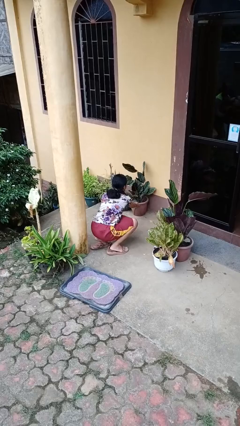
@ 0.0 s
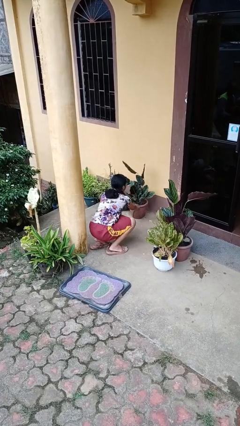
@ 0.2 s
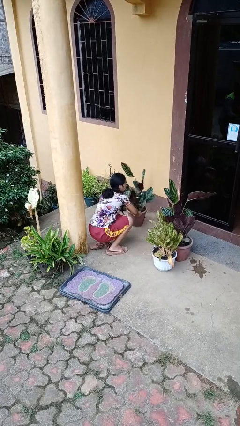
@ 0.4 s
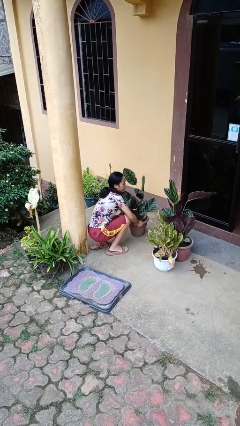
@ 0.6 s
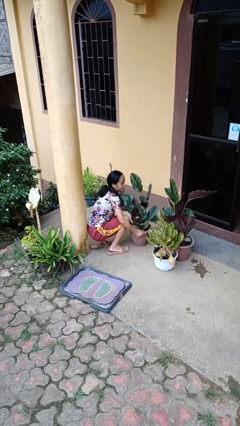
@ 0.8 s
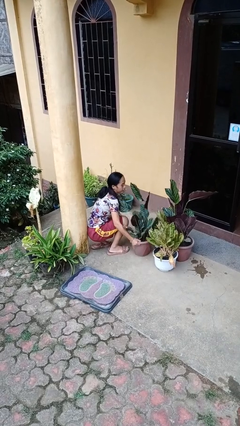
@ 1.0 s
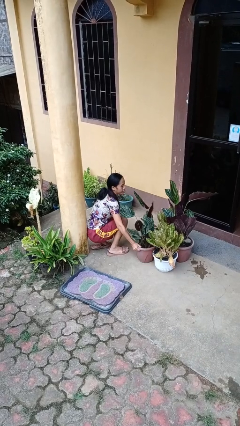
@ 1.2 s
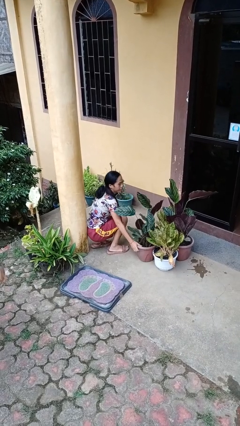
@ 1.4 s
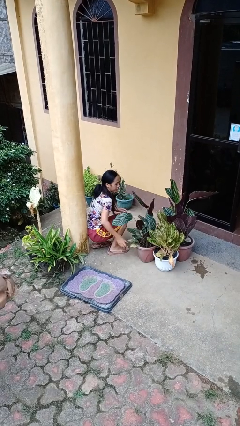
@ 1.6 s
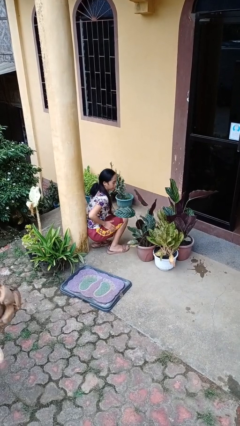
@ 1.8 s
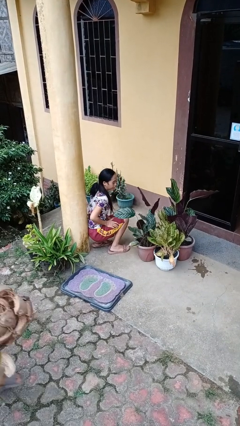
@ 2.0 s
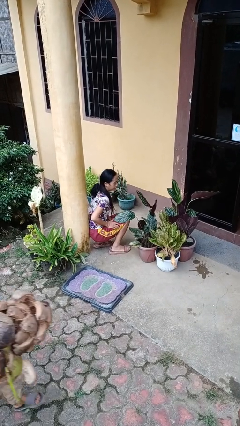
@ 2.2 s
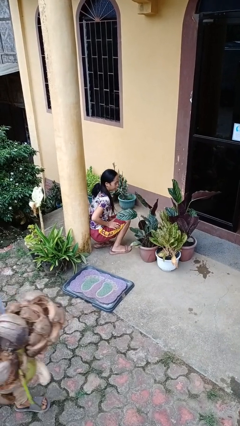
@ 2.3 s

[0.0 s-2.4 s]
person arranges flowers in vase

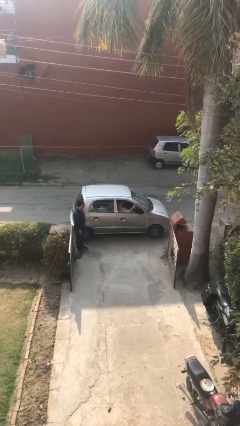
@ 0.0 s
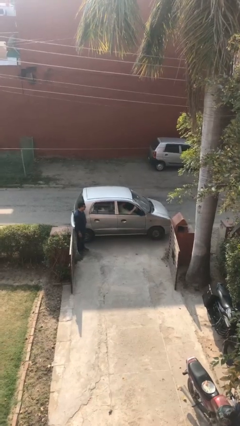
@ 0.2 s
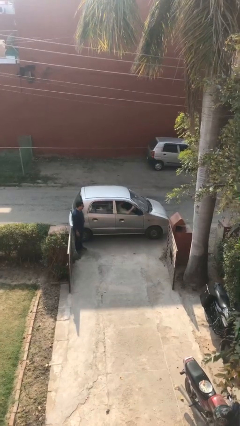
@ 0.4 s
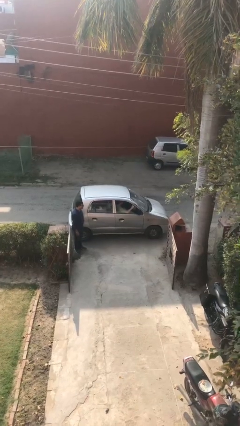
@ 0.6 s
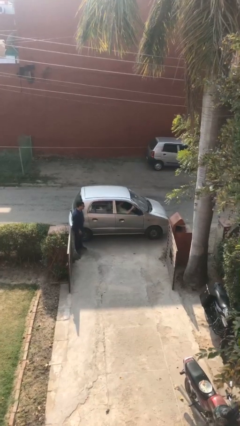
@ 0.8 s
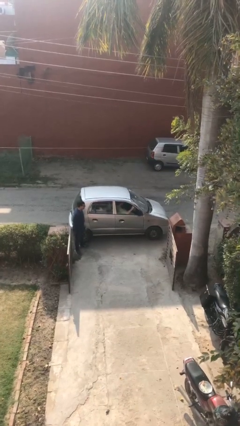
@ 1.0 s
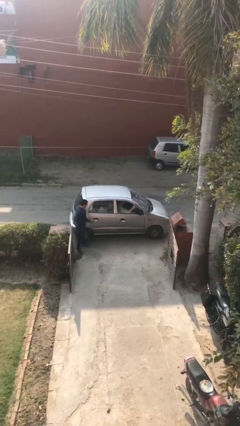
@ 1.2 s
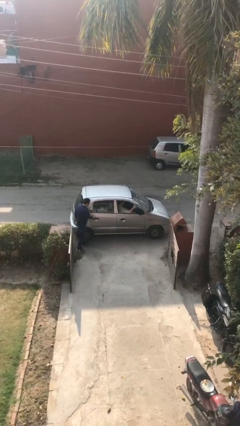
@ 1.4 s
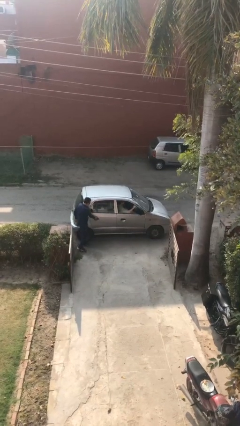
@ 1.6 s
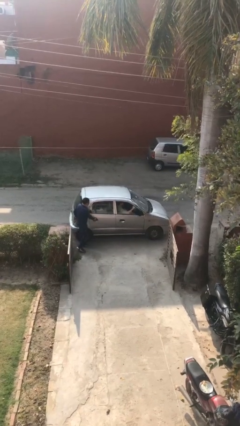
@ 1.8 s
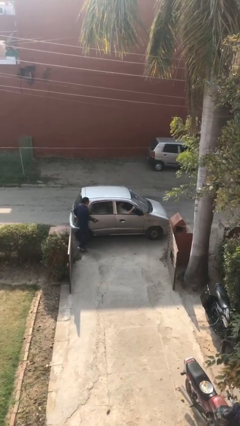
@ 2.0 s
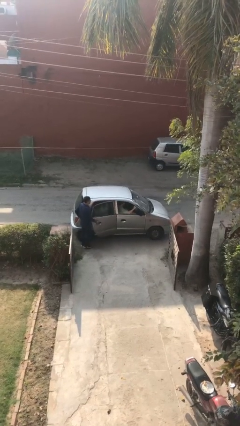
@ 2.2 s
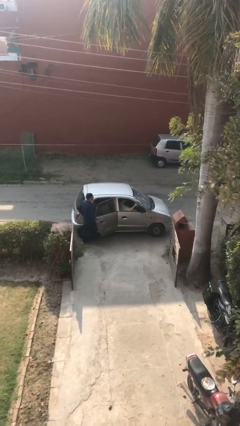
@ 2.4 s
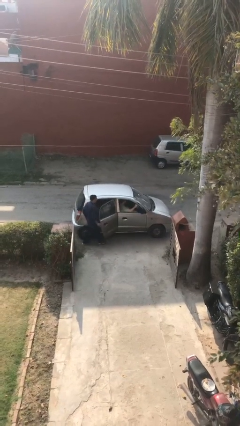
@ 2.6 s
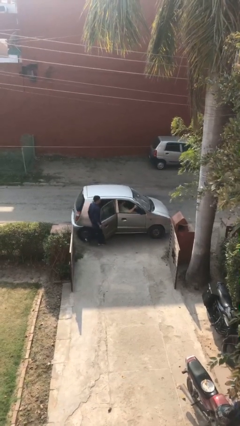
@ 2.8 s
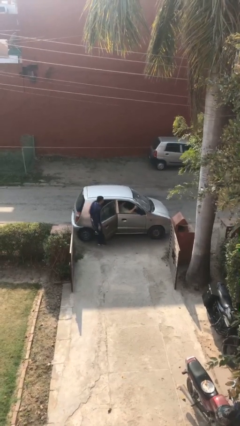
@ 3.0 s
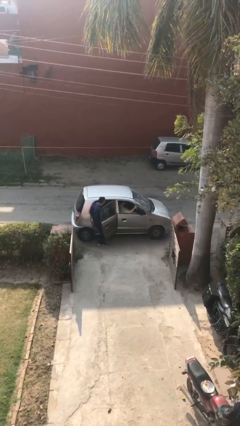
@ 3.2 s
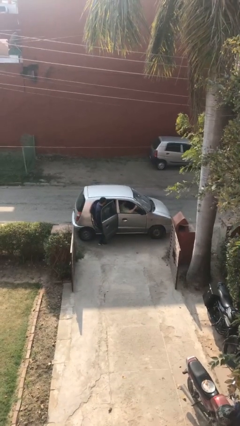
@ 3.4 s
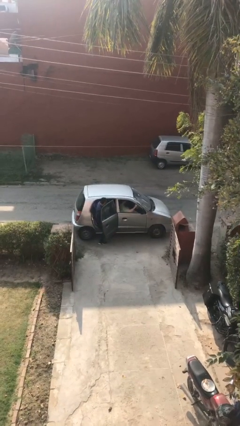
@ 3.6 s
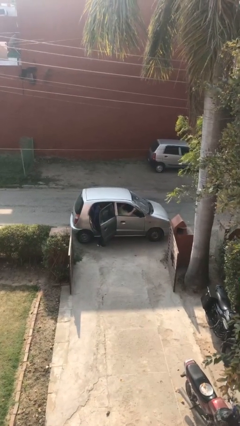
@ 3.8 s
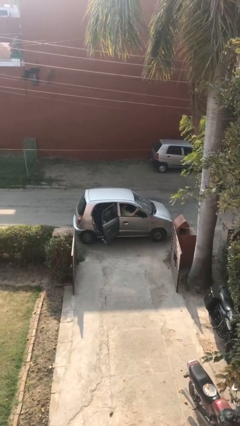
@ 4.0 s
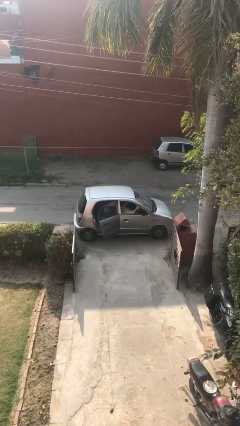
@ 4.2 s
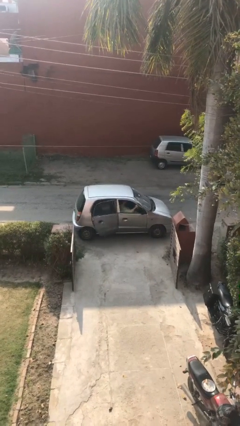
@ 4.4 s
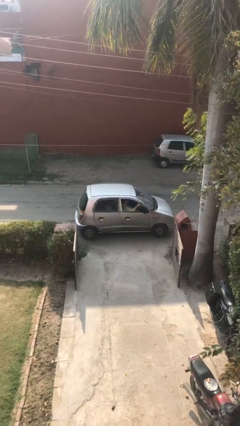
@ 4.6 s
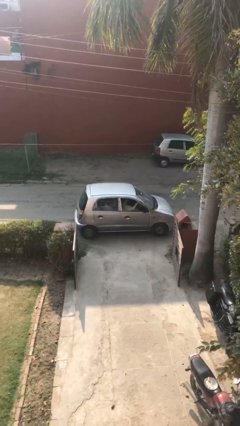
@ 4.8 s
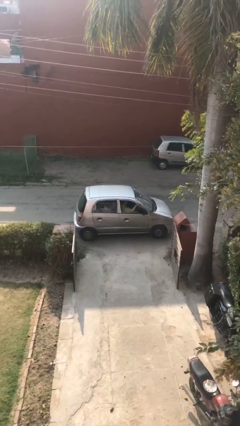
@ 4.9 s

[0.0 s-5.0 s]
car picks up person

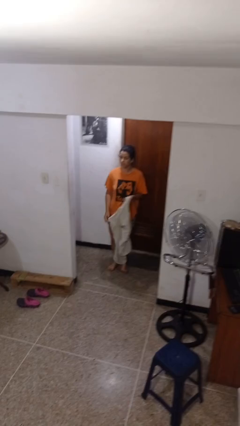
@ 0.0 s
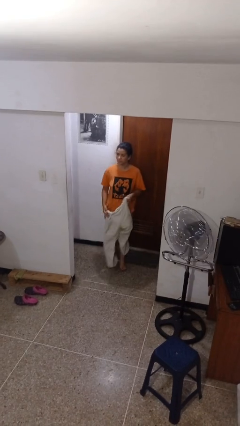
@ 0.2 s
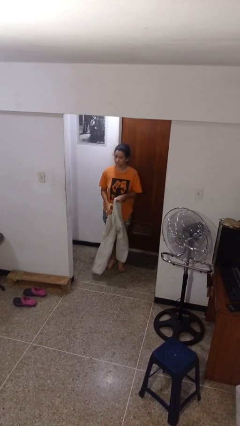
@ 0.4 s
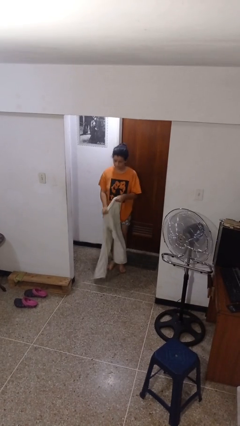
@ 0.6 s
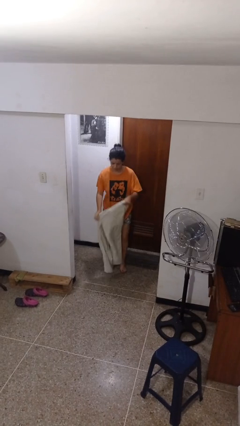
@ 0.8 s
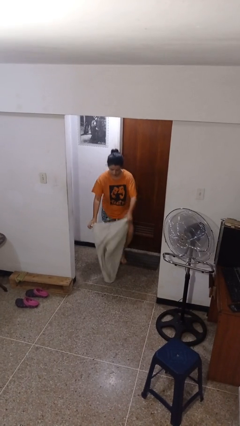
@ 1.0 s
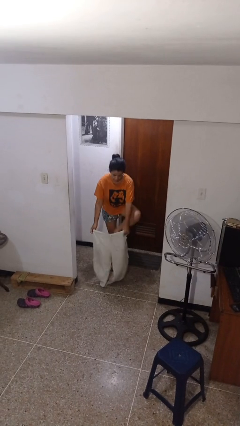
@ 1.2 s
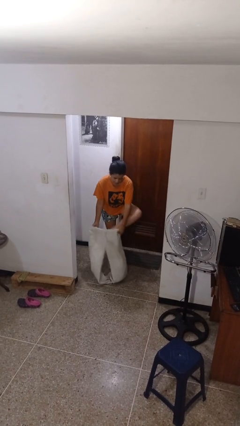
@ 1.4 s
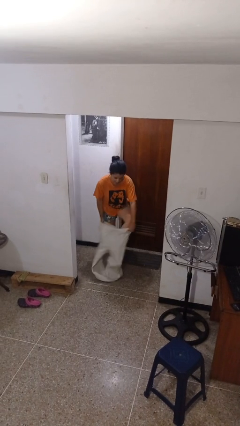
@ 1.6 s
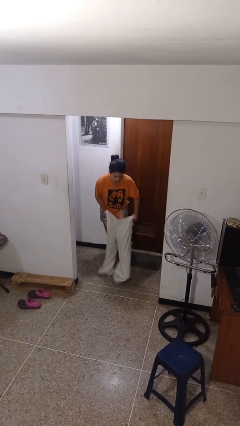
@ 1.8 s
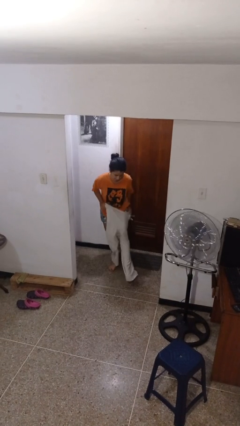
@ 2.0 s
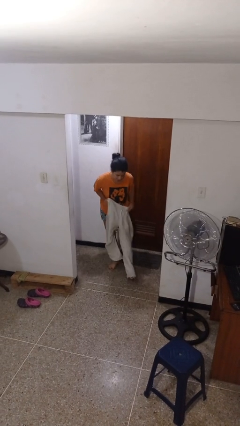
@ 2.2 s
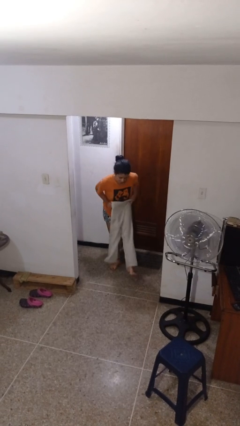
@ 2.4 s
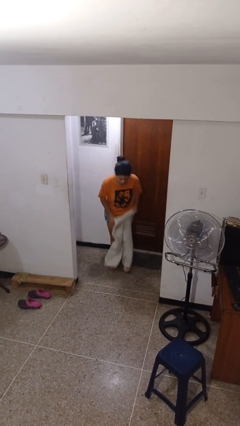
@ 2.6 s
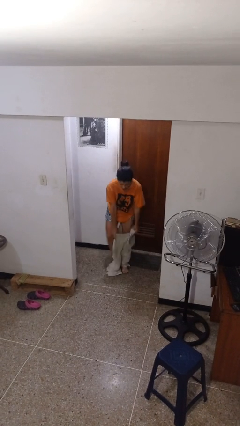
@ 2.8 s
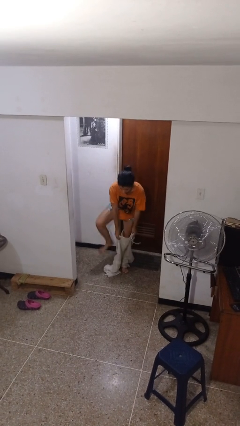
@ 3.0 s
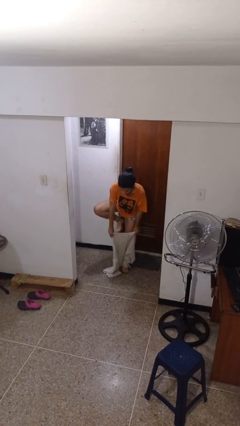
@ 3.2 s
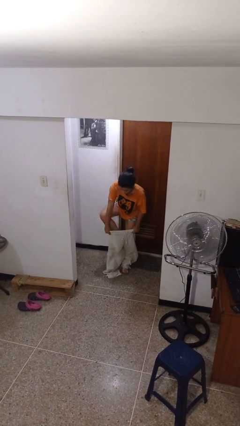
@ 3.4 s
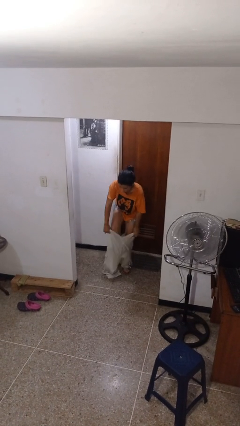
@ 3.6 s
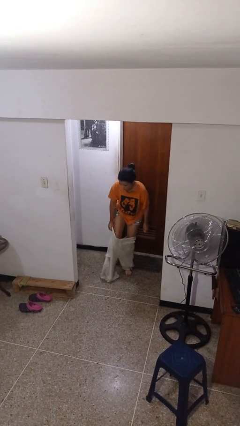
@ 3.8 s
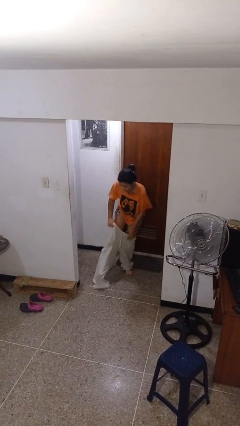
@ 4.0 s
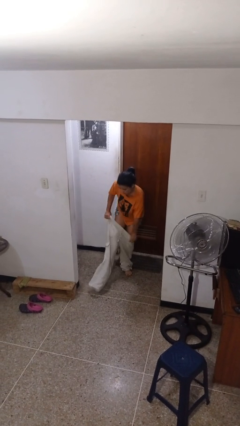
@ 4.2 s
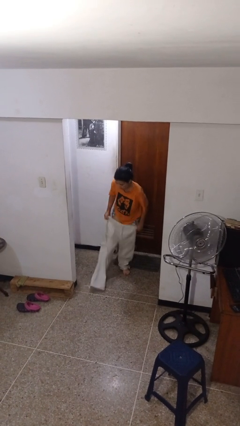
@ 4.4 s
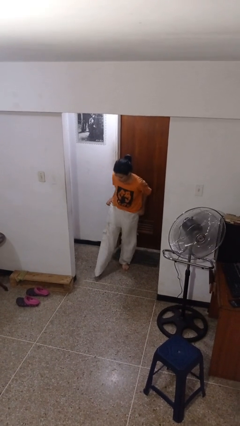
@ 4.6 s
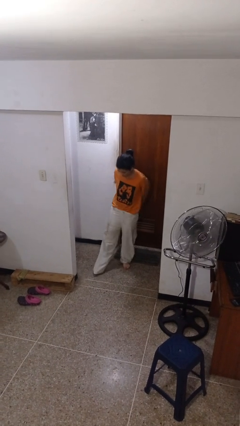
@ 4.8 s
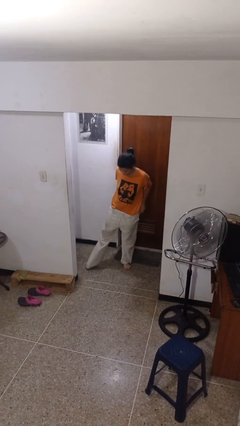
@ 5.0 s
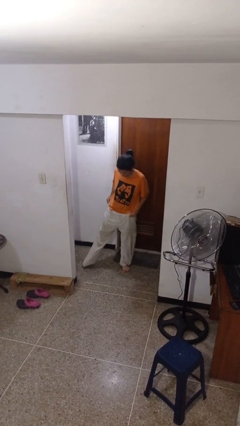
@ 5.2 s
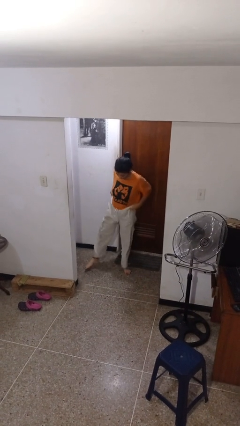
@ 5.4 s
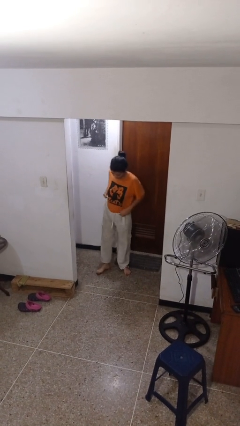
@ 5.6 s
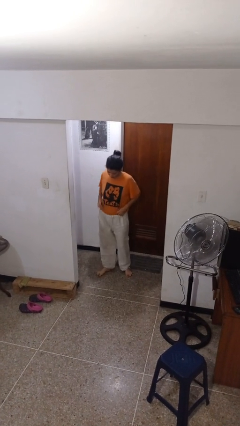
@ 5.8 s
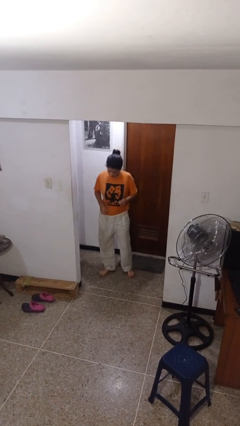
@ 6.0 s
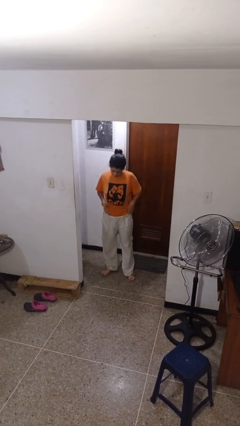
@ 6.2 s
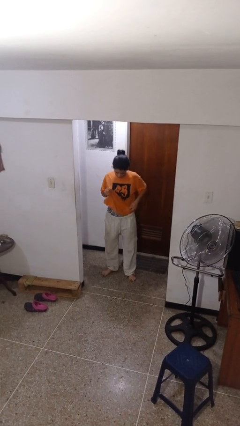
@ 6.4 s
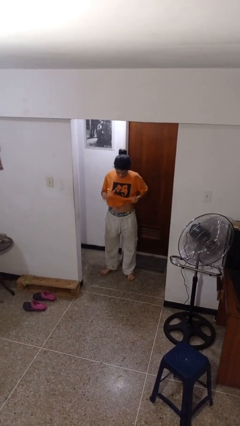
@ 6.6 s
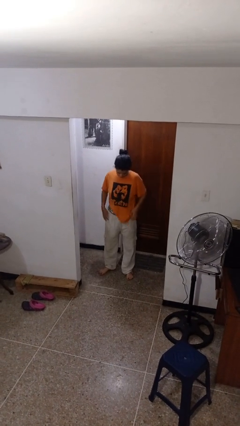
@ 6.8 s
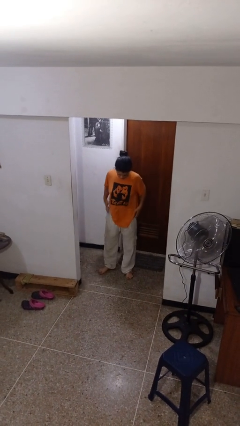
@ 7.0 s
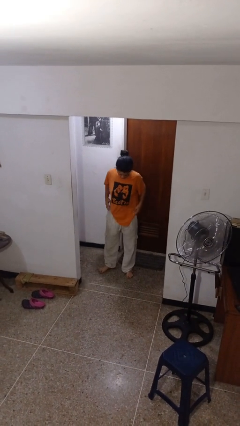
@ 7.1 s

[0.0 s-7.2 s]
person puts on pants

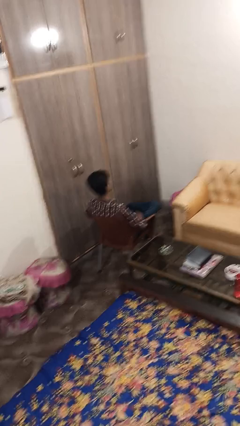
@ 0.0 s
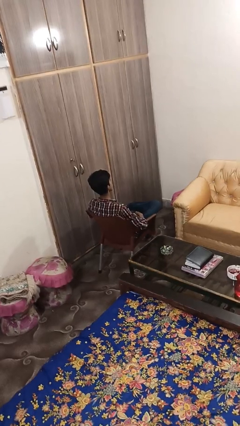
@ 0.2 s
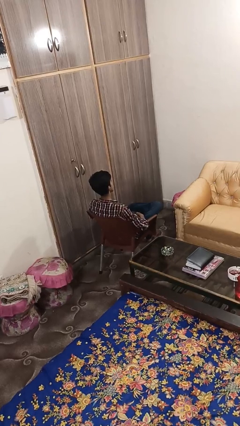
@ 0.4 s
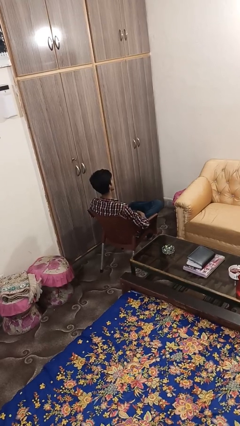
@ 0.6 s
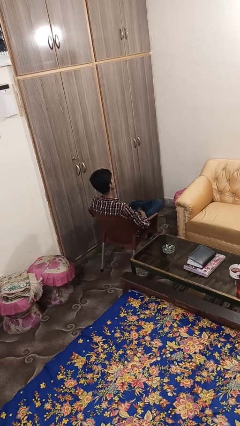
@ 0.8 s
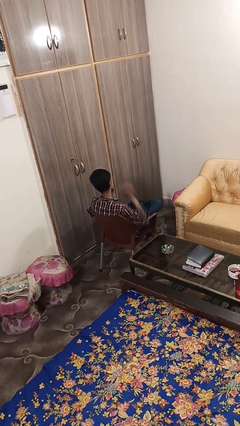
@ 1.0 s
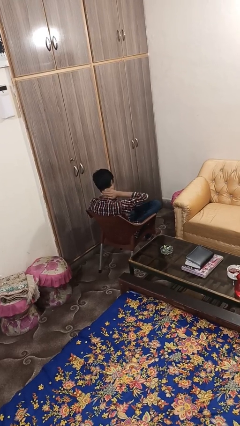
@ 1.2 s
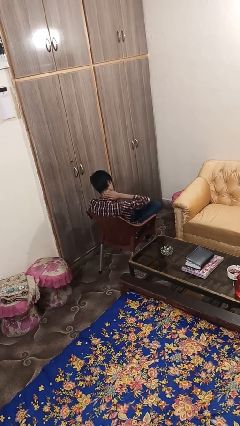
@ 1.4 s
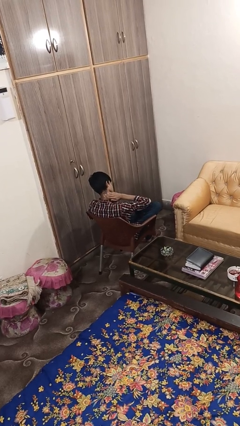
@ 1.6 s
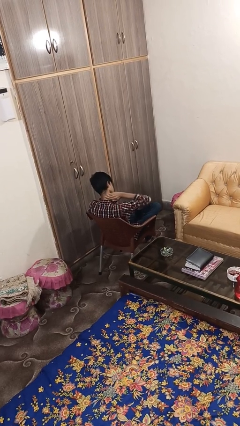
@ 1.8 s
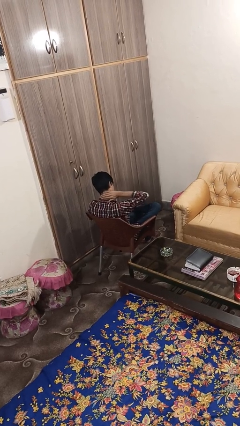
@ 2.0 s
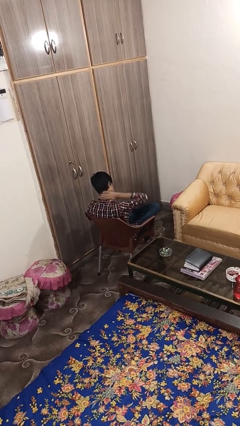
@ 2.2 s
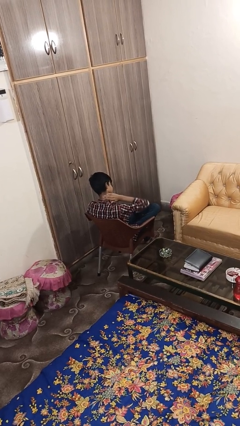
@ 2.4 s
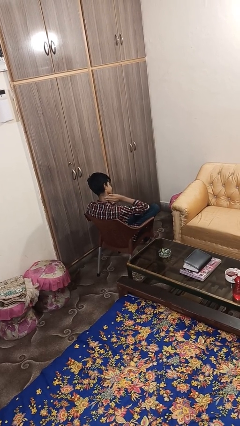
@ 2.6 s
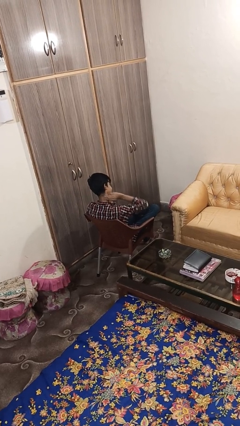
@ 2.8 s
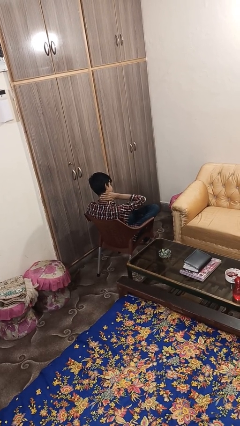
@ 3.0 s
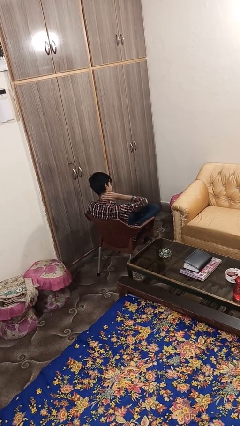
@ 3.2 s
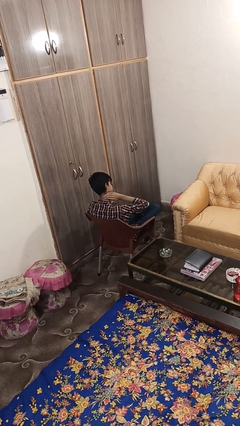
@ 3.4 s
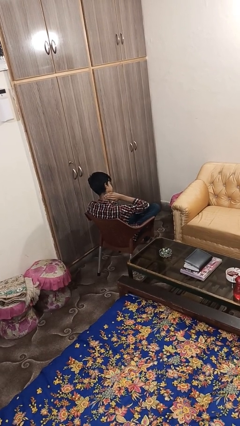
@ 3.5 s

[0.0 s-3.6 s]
person swats bug
